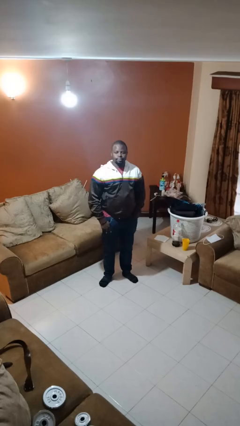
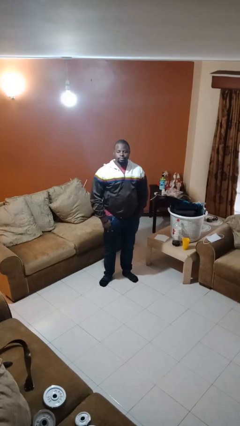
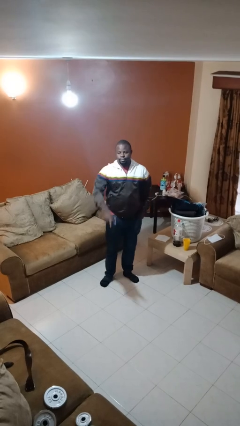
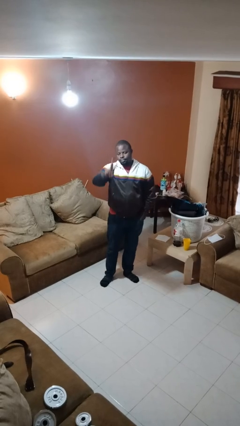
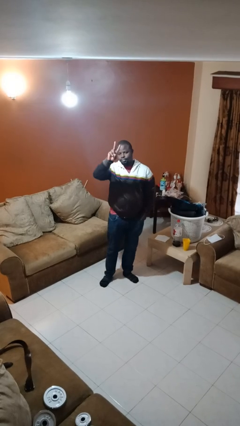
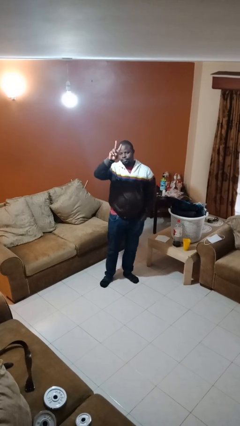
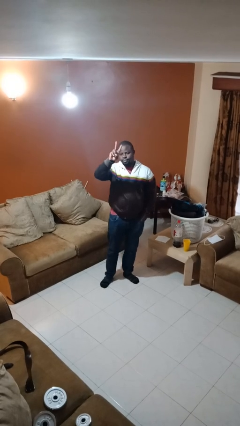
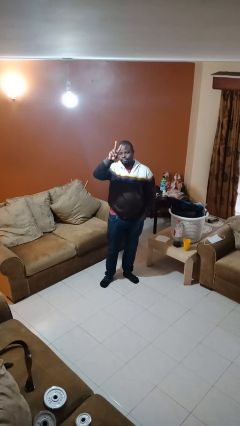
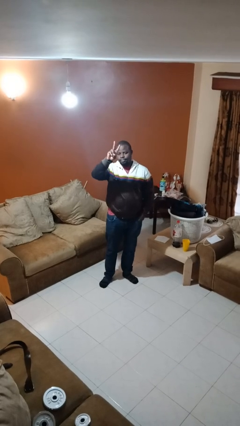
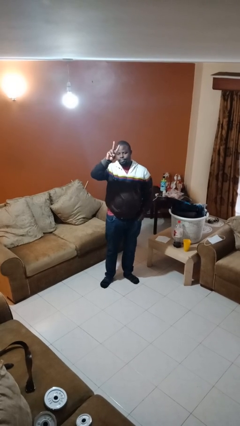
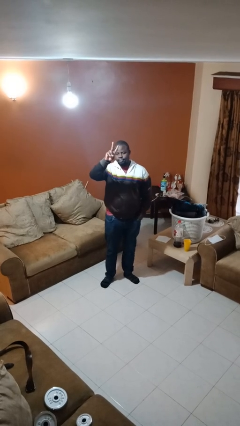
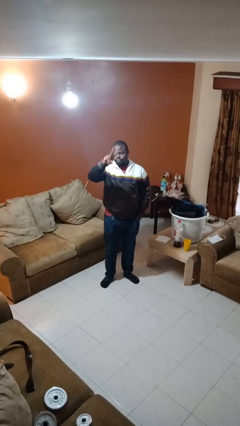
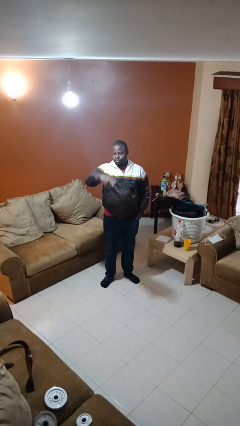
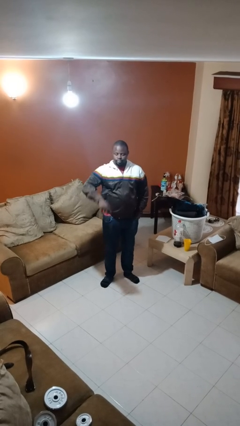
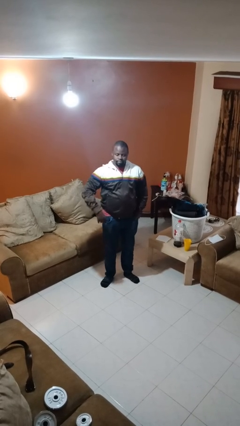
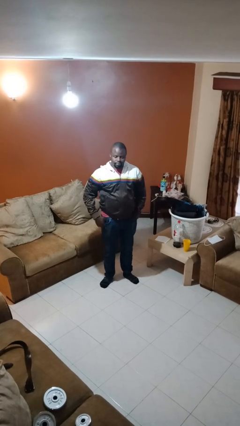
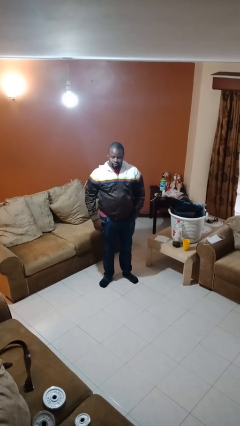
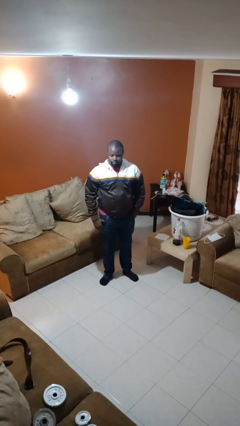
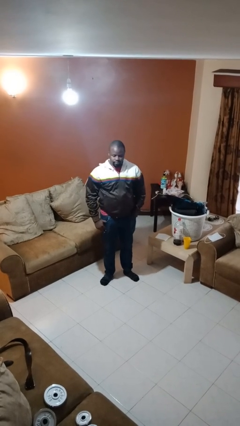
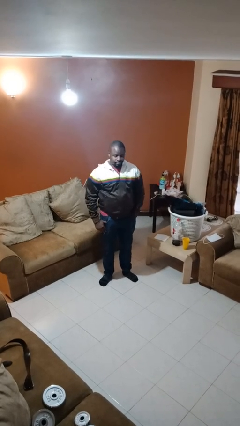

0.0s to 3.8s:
person gestures peace

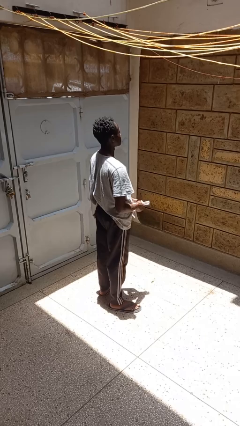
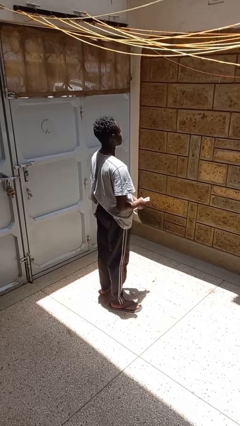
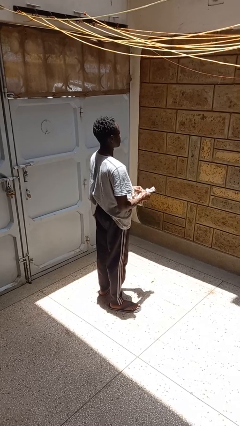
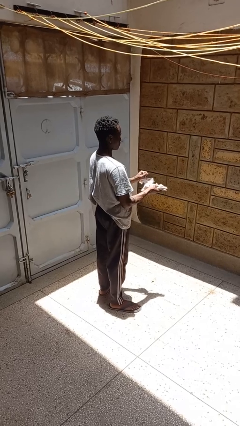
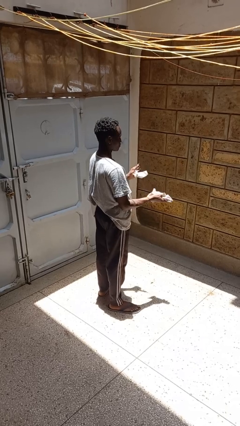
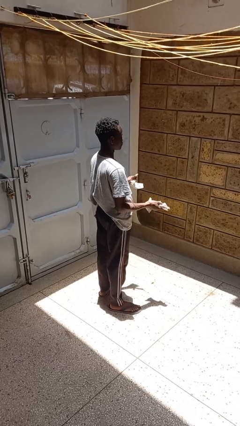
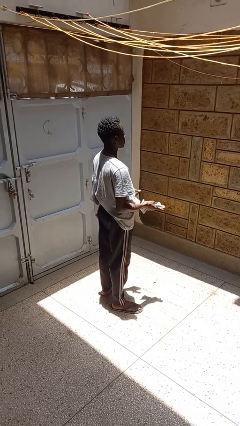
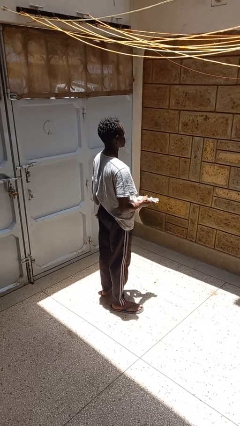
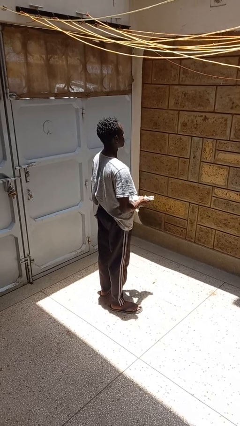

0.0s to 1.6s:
person tears paper

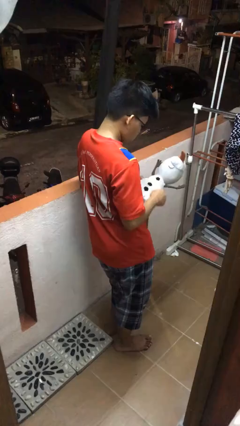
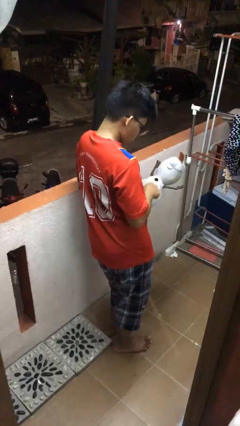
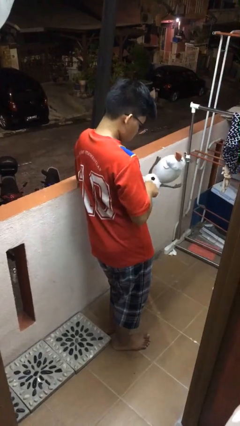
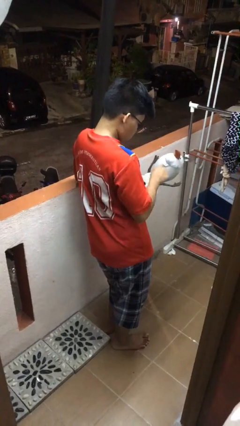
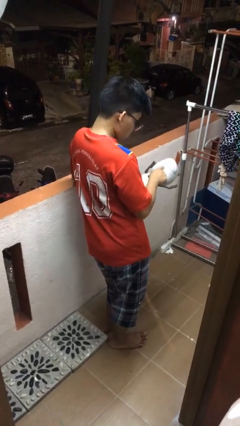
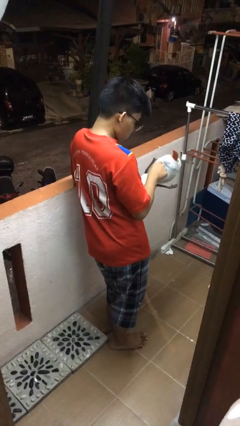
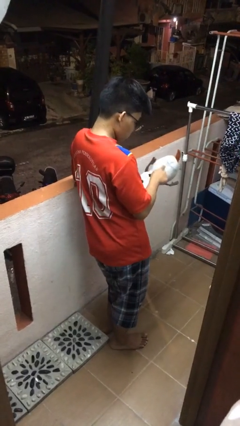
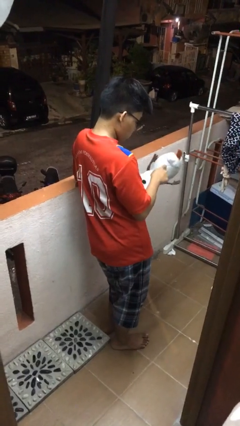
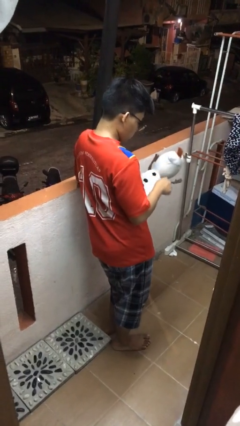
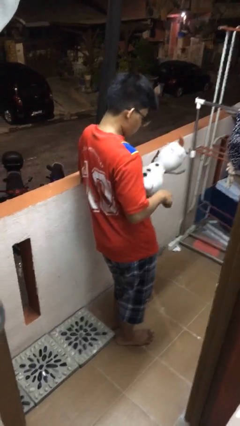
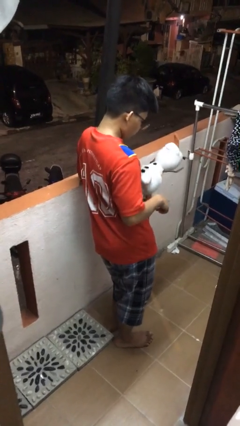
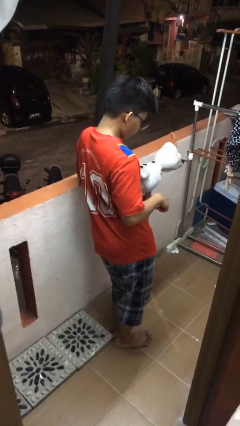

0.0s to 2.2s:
person taps object with finger

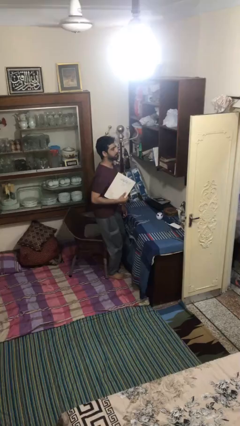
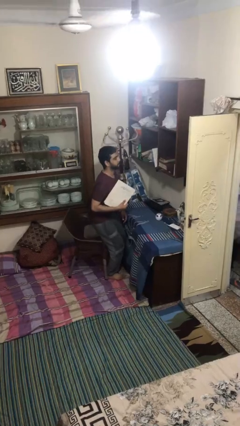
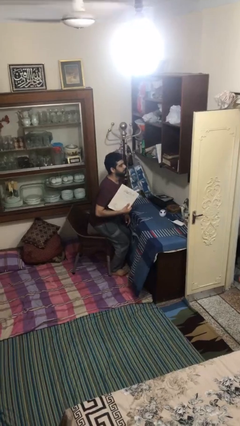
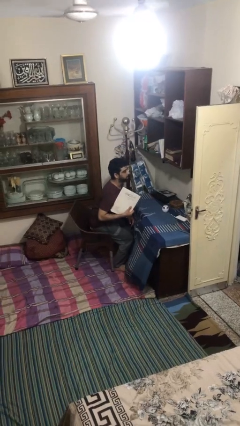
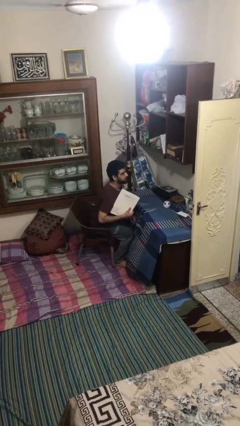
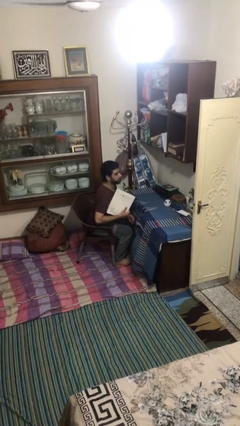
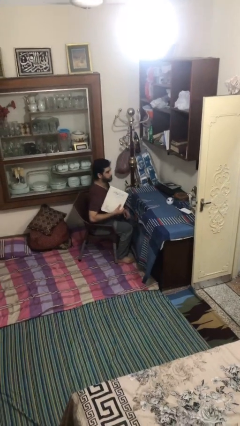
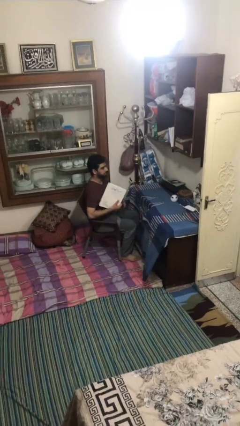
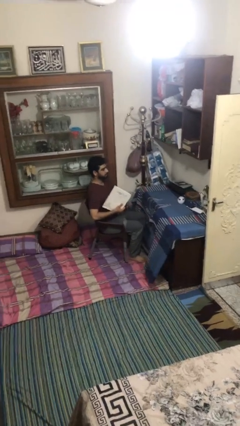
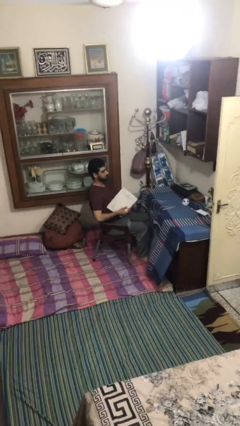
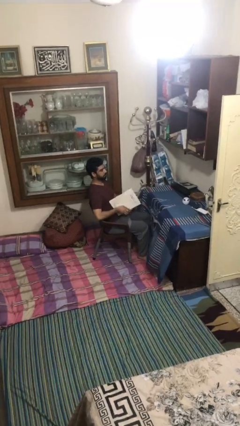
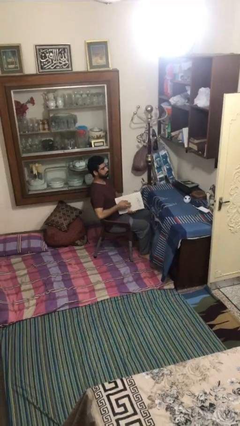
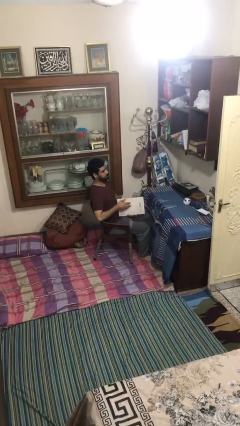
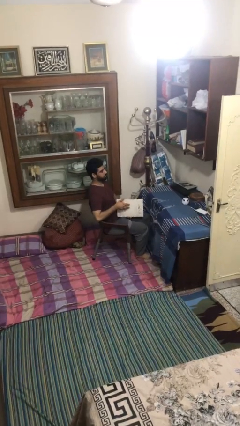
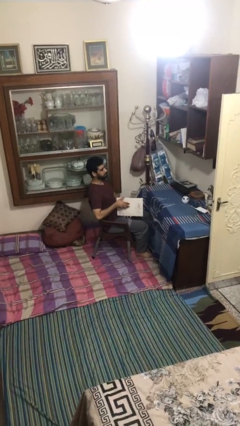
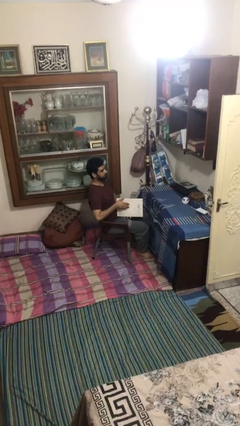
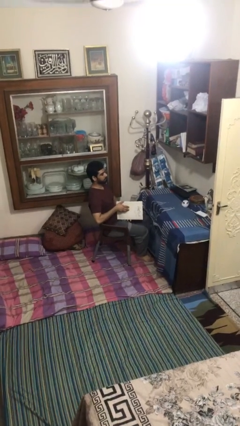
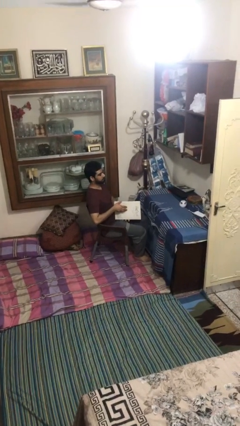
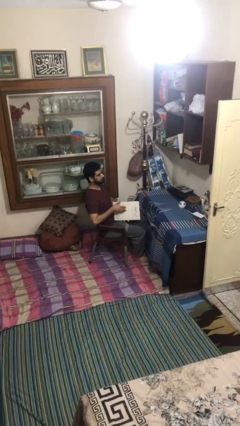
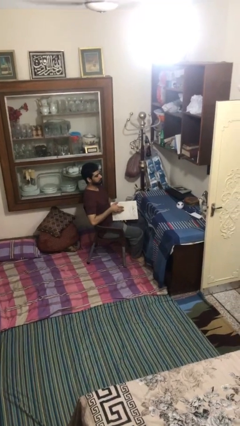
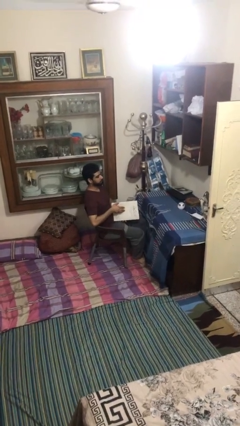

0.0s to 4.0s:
person sits down

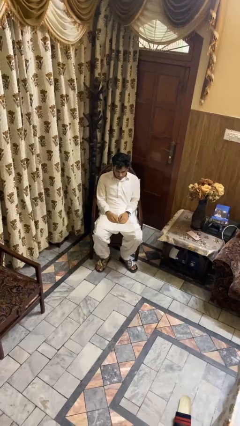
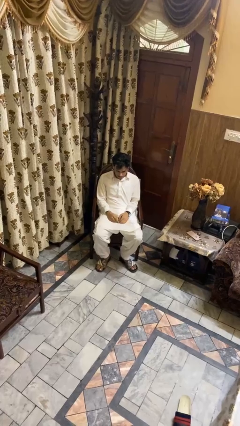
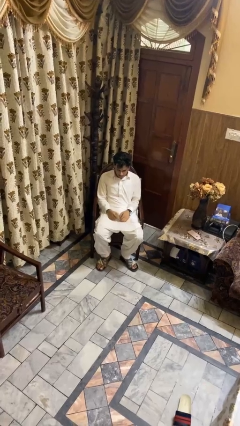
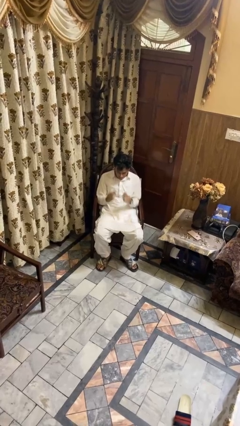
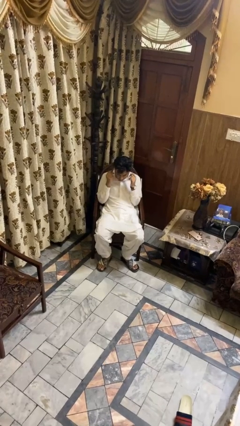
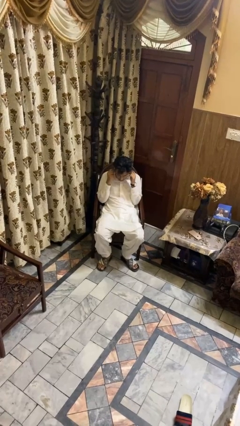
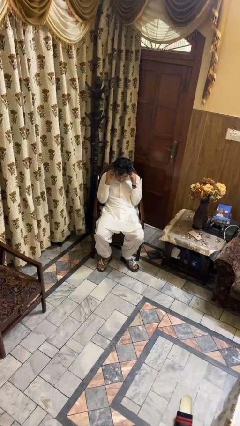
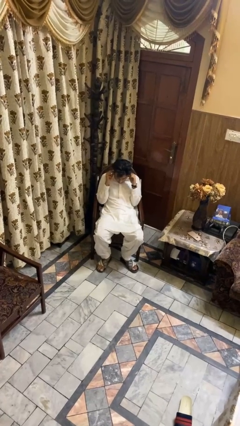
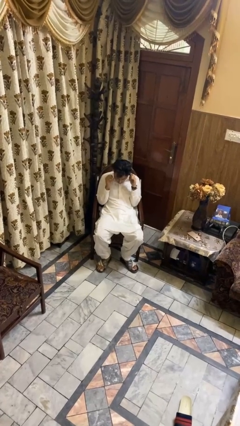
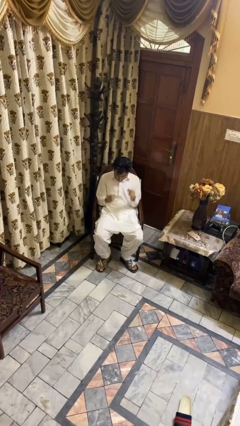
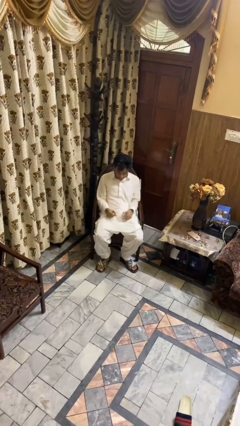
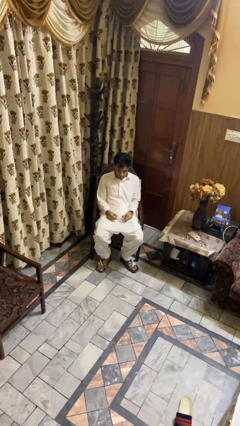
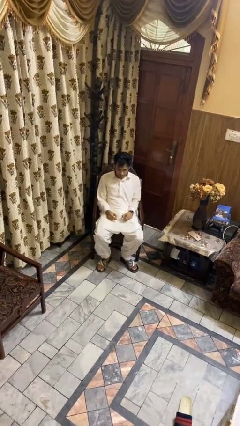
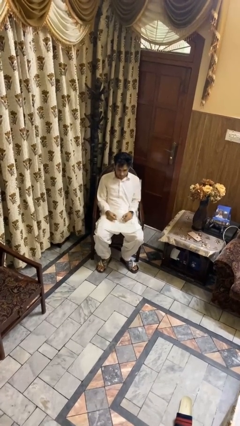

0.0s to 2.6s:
person takes off headphones

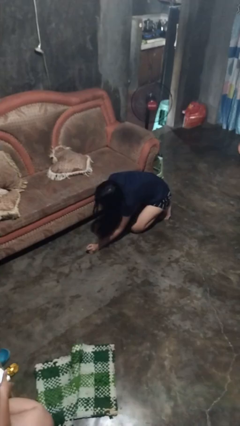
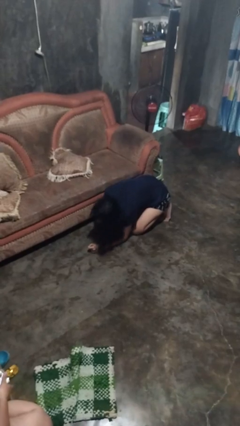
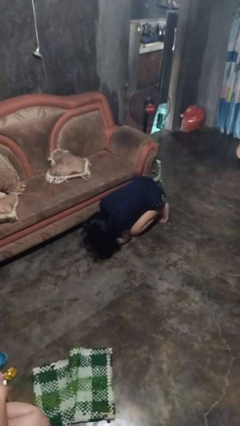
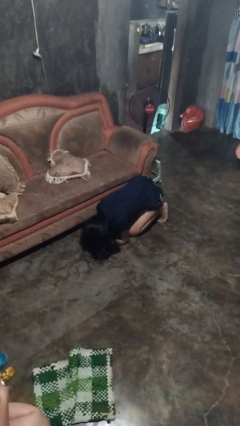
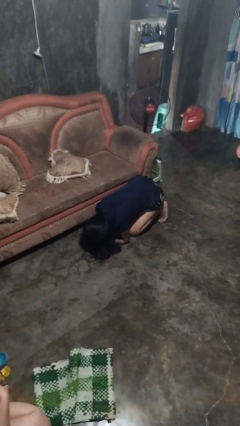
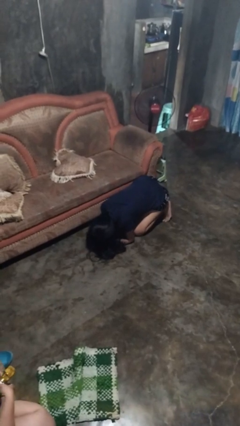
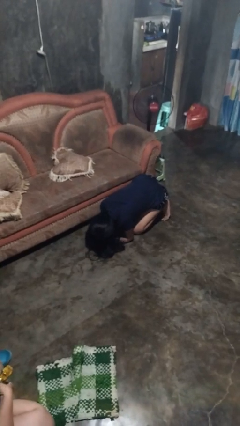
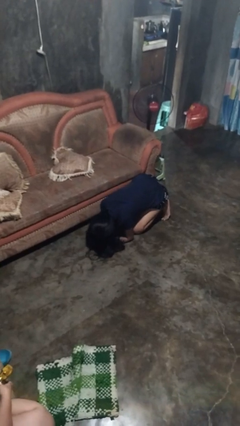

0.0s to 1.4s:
person searches under couch

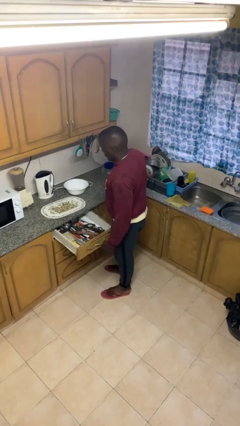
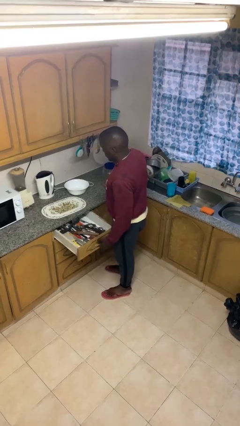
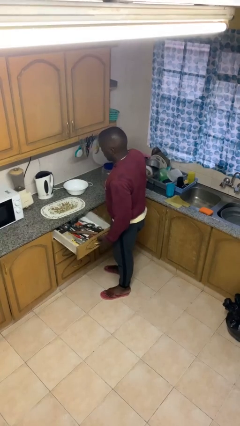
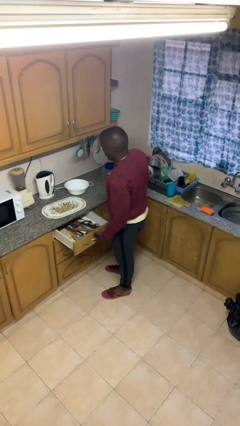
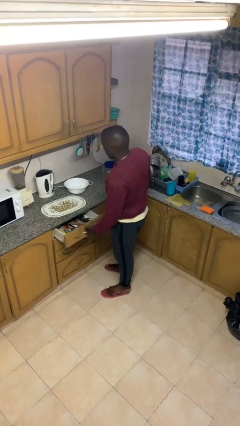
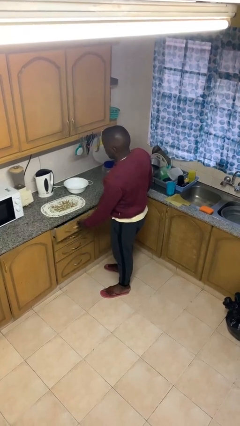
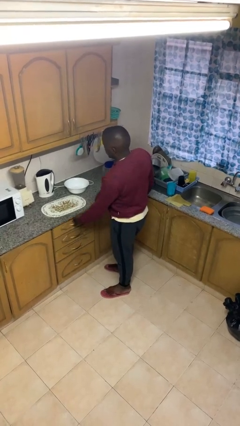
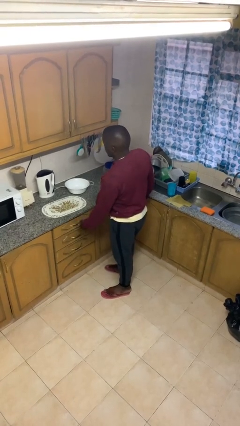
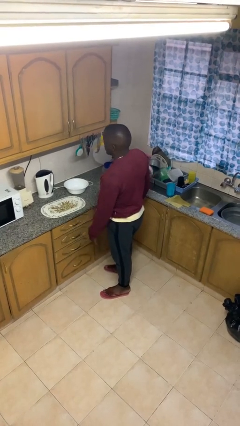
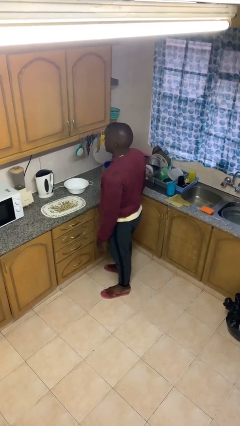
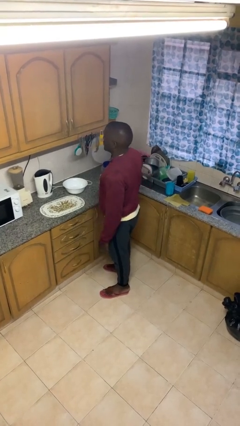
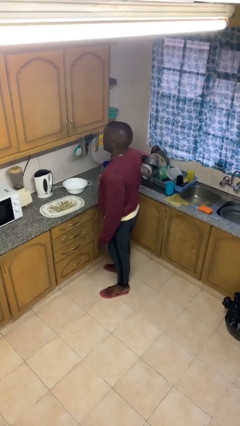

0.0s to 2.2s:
person closes kitchen drawer
